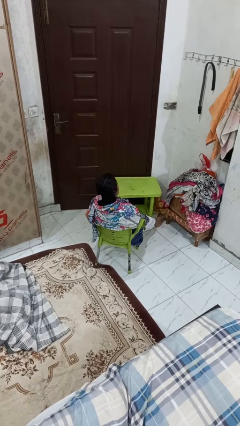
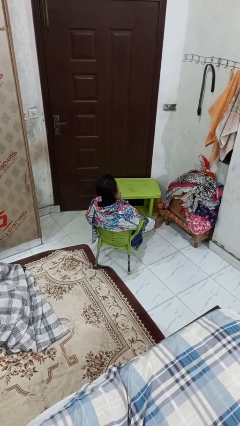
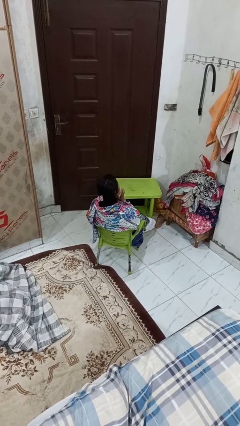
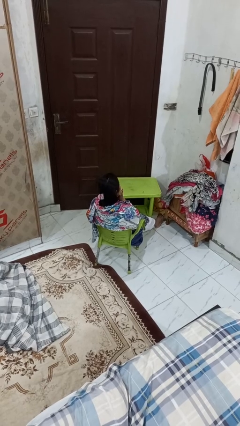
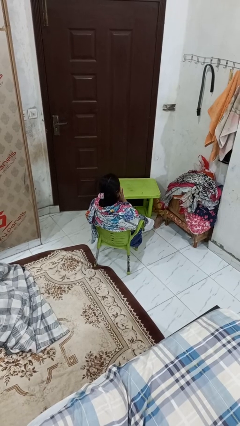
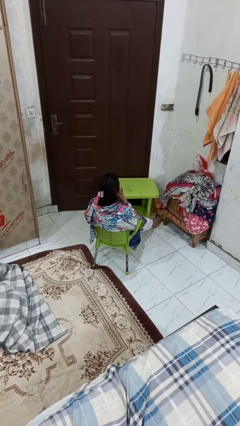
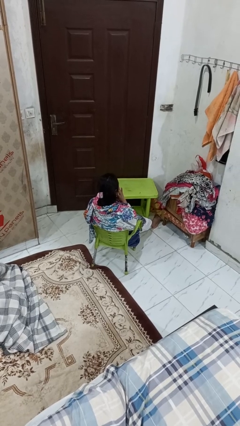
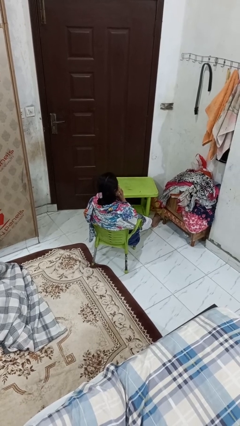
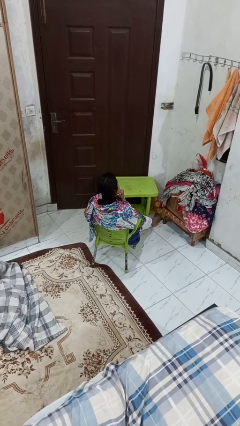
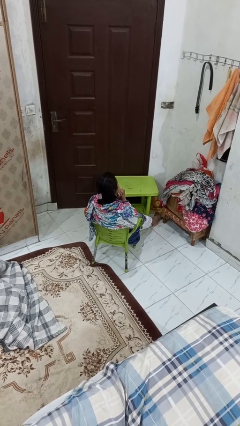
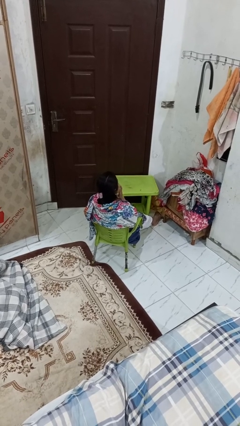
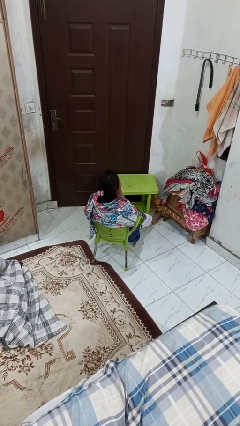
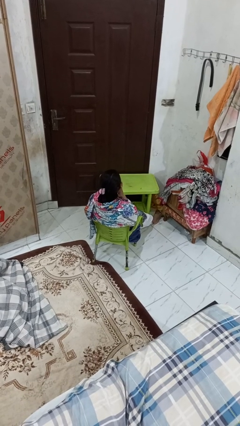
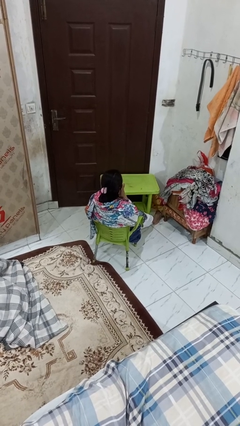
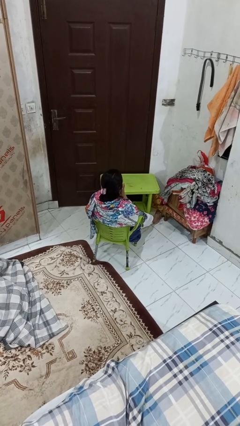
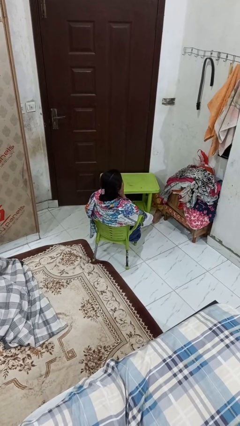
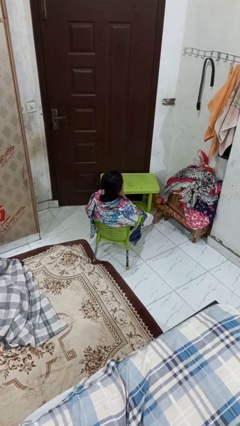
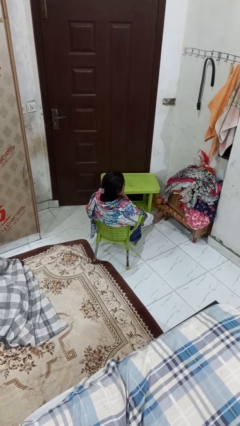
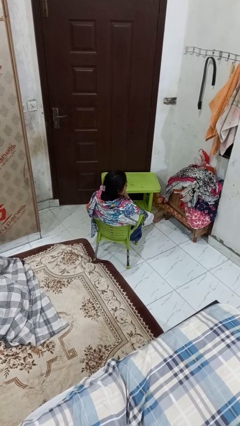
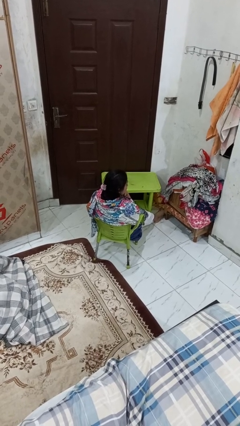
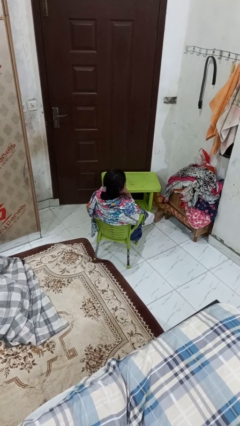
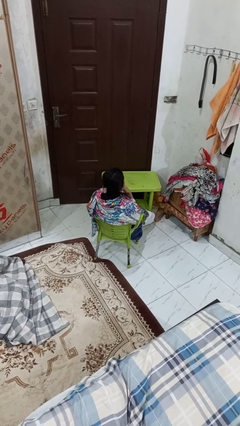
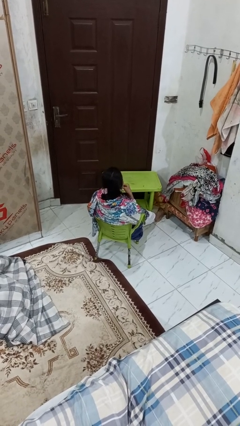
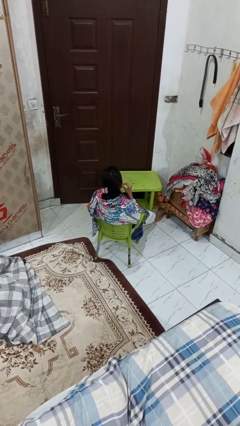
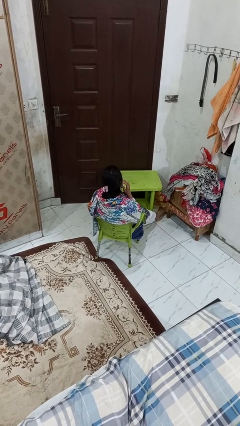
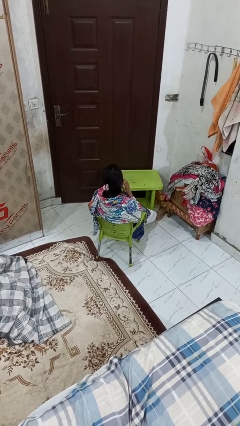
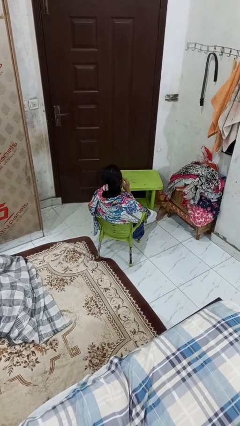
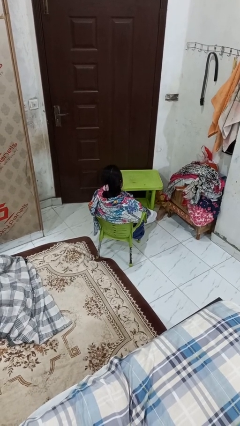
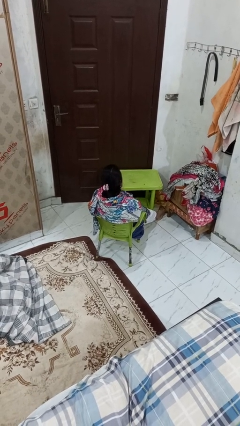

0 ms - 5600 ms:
person strokes chin

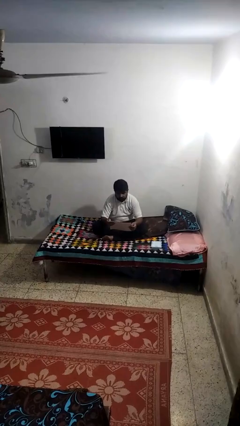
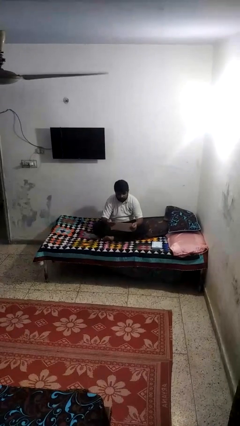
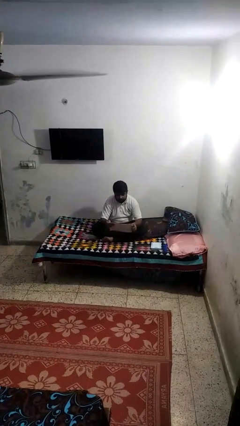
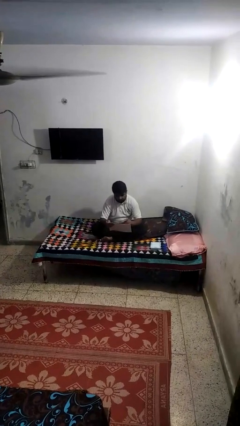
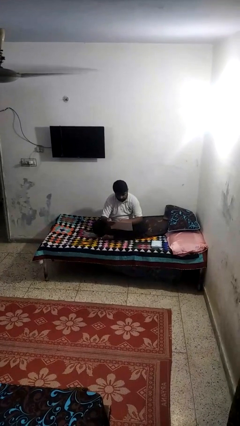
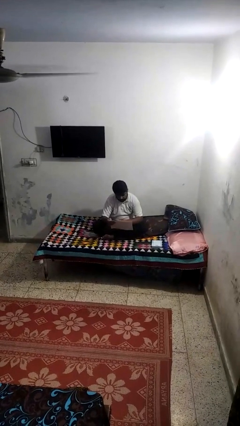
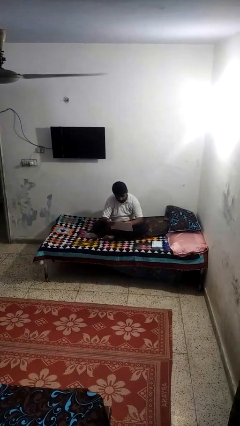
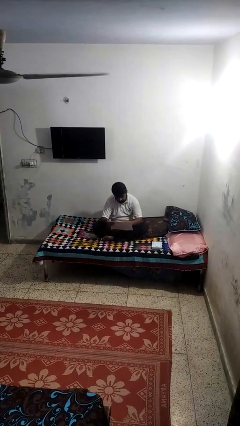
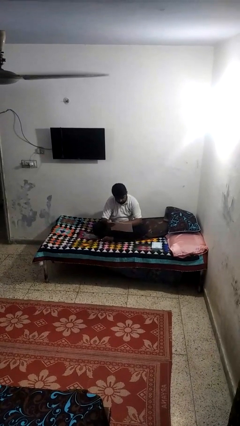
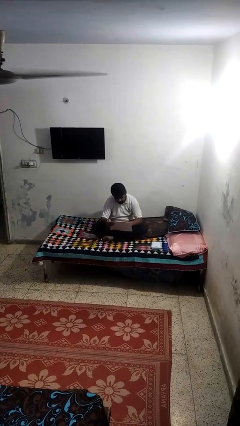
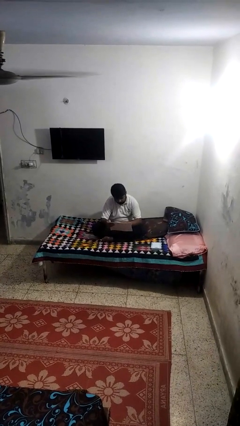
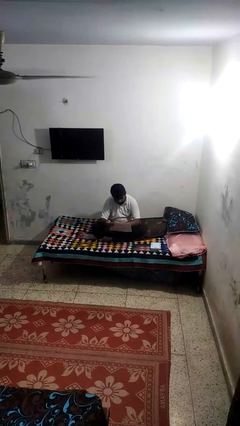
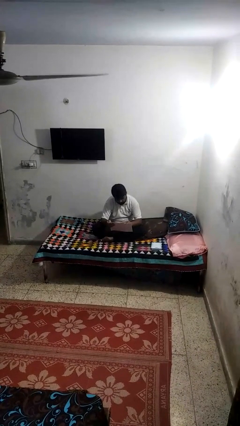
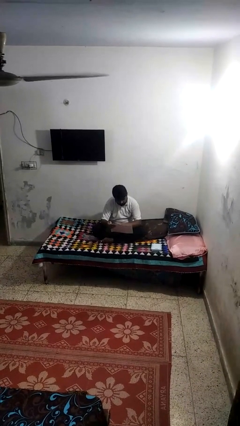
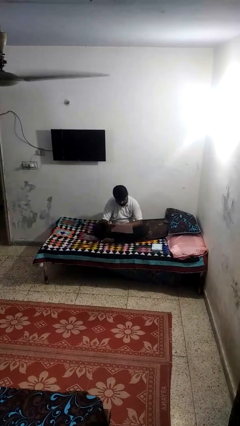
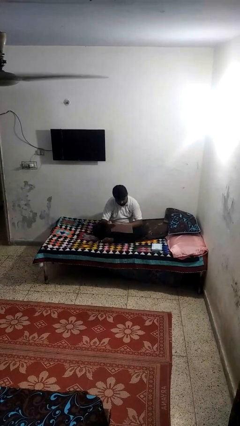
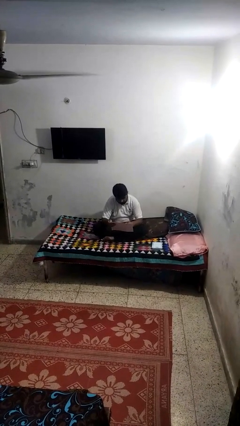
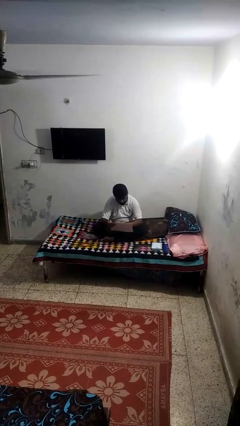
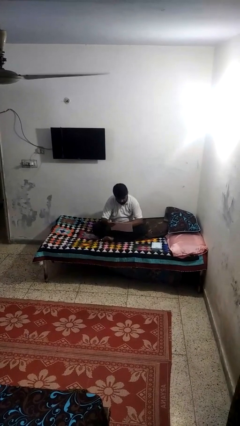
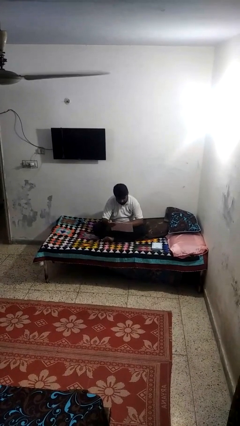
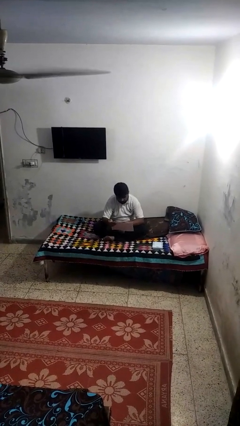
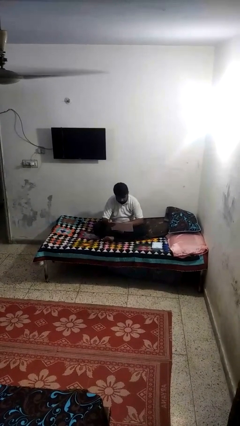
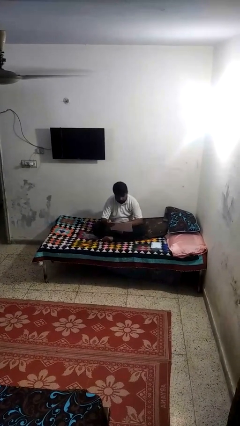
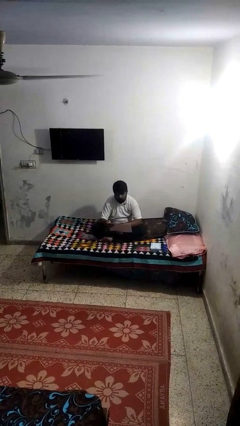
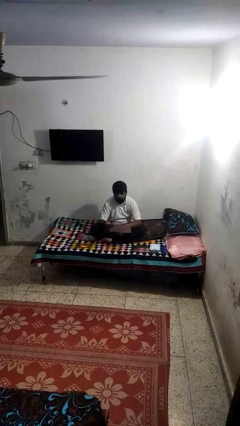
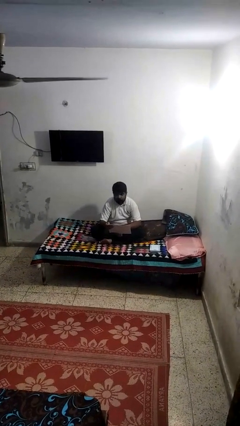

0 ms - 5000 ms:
person interacts with tablet

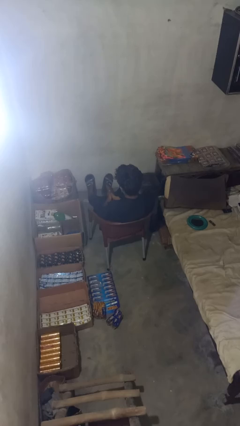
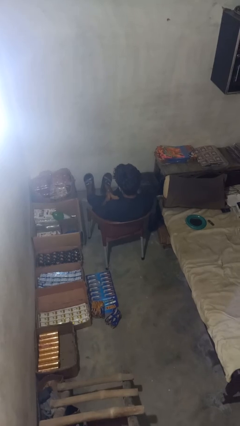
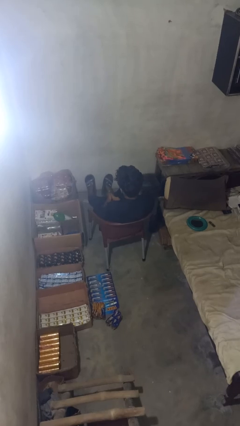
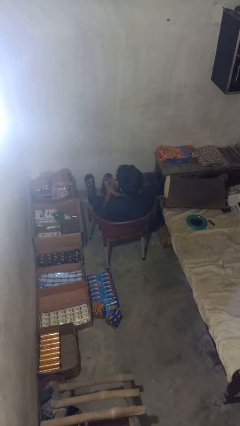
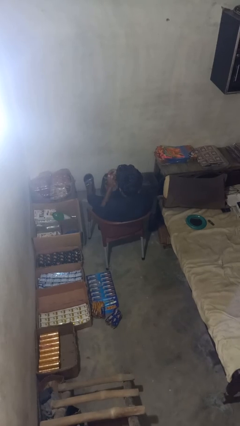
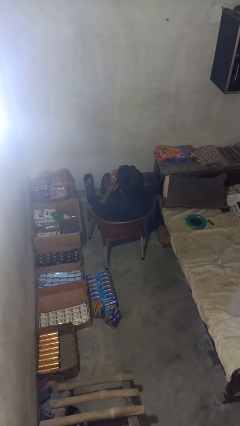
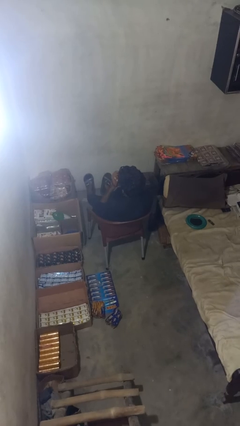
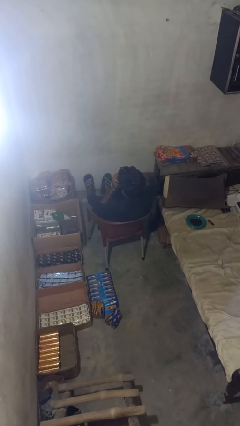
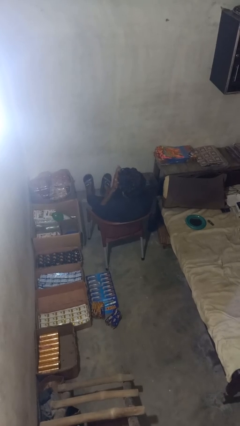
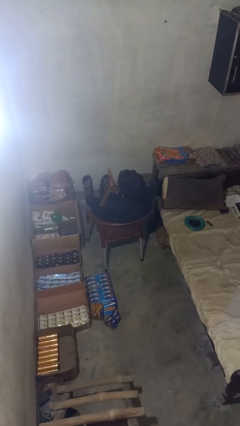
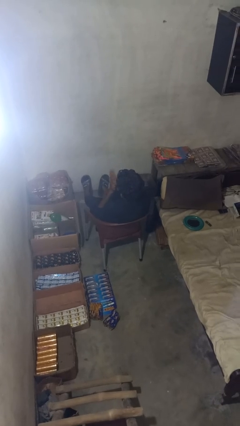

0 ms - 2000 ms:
person blows into hands

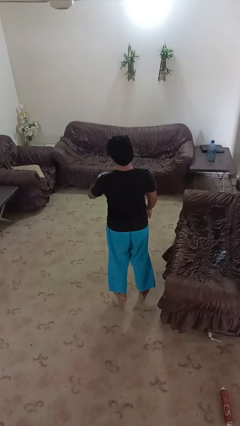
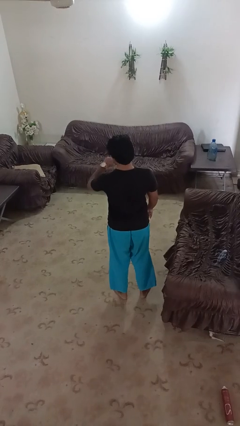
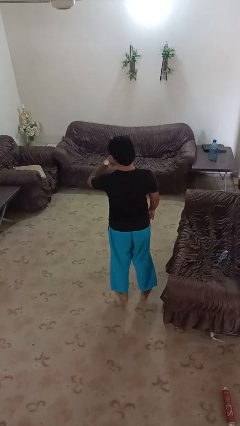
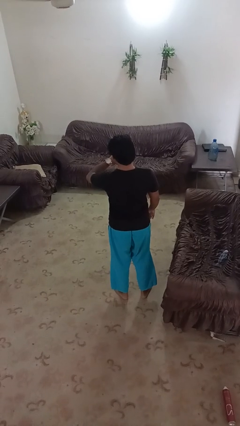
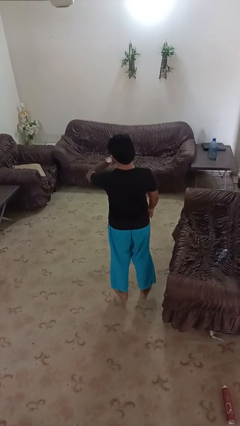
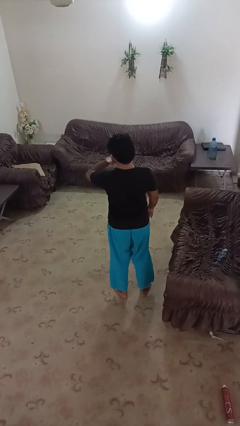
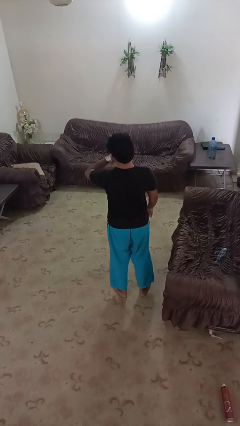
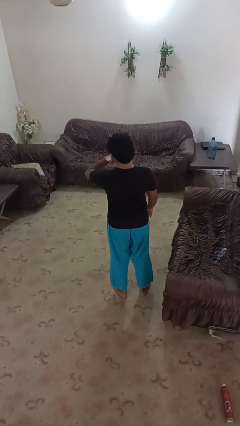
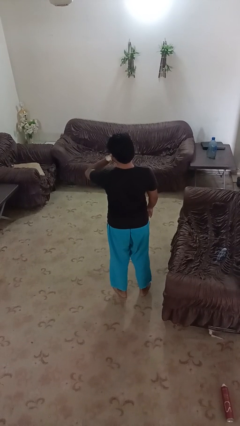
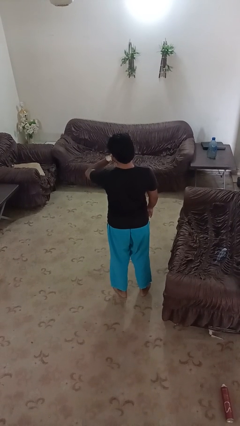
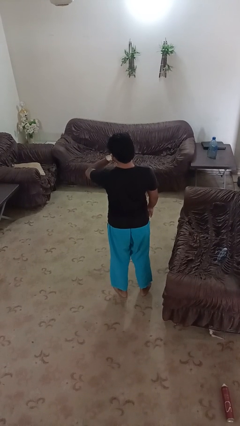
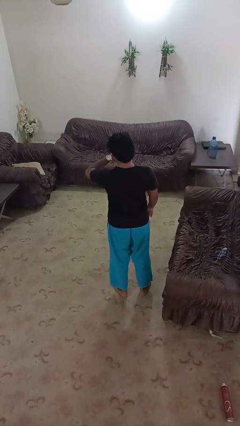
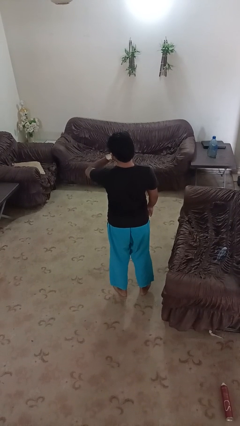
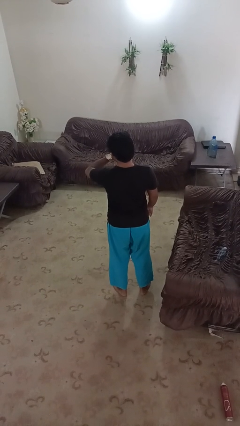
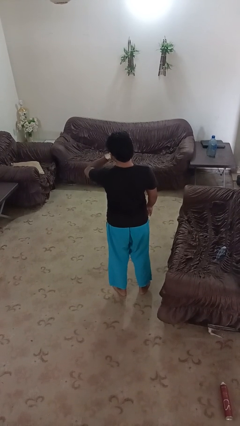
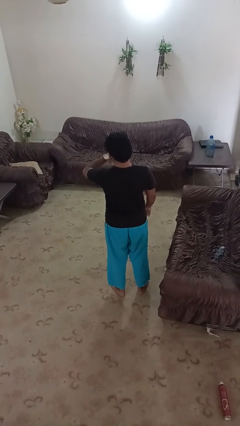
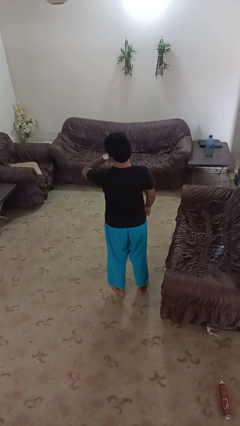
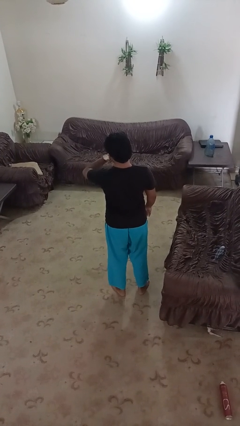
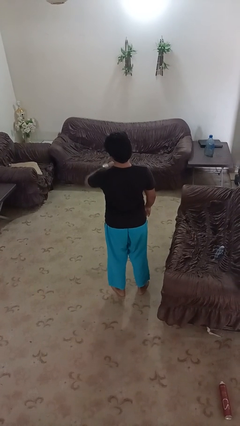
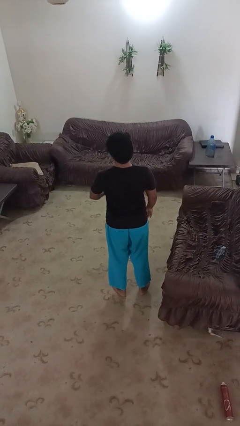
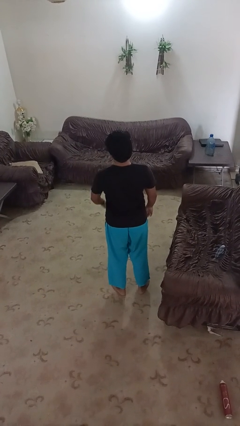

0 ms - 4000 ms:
person looks at wristwatch

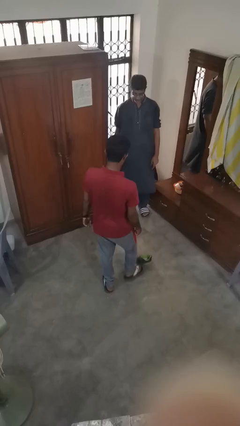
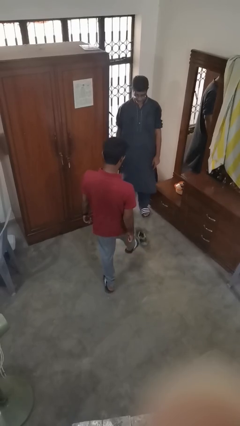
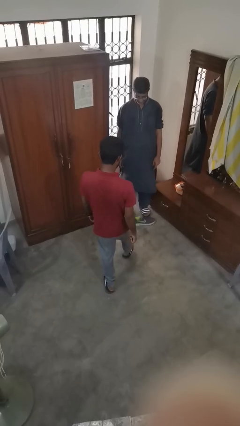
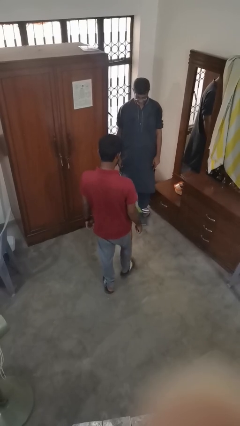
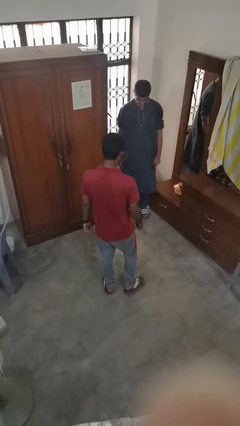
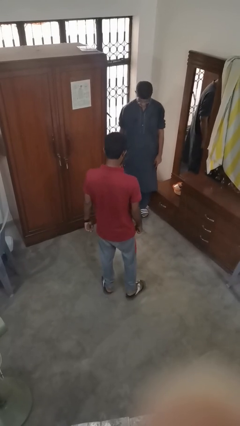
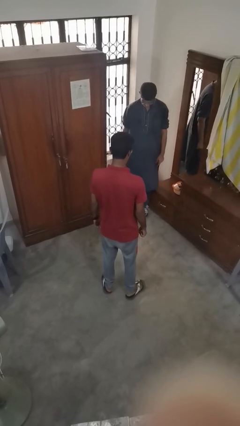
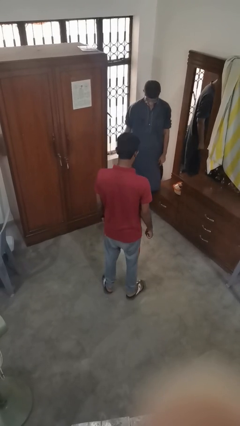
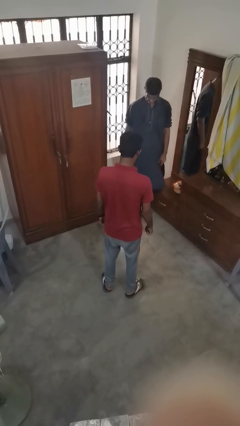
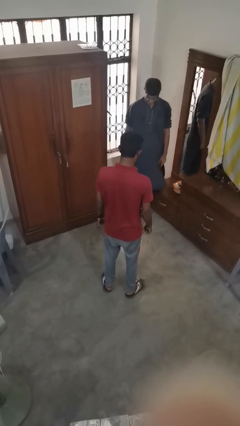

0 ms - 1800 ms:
person kicks object to person
